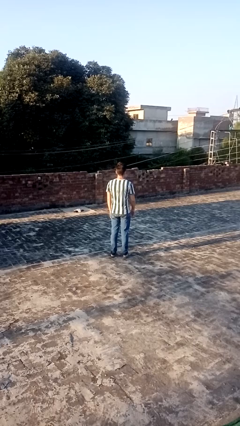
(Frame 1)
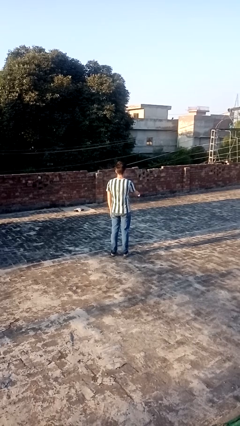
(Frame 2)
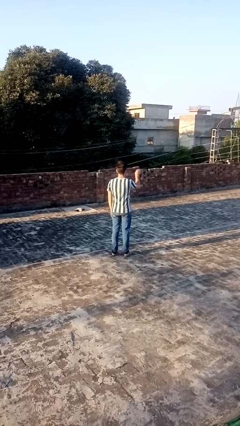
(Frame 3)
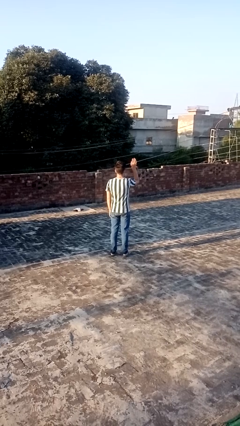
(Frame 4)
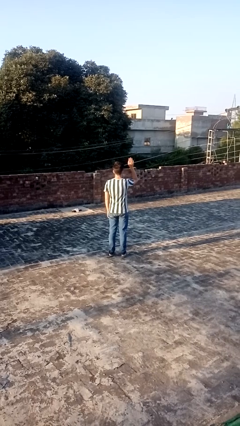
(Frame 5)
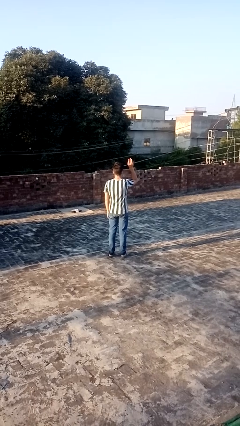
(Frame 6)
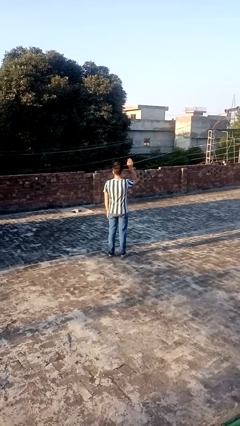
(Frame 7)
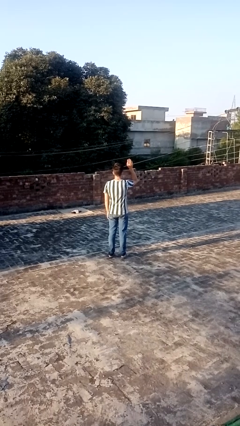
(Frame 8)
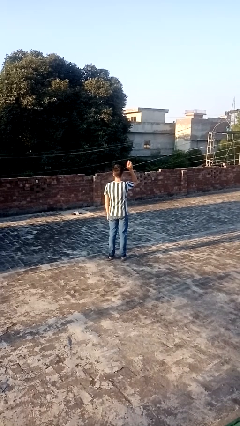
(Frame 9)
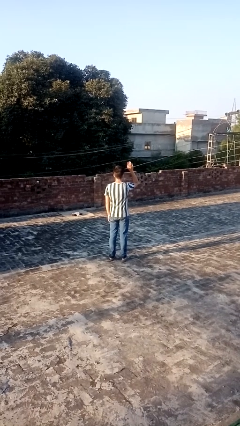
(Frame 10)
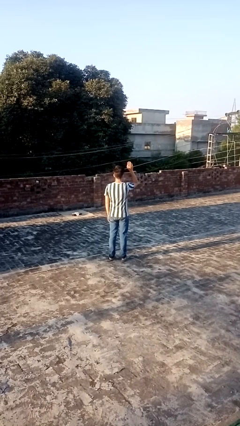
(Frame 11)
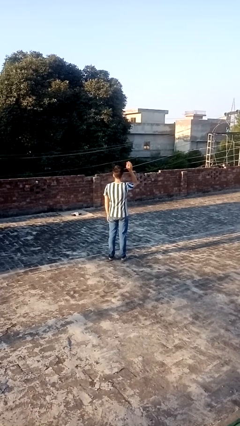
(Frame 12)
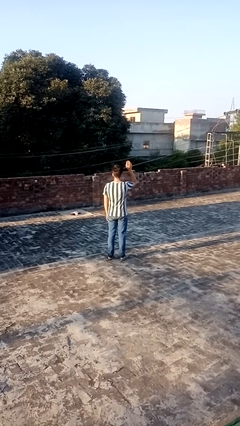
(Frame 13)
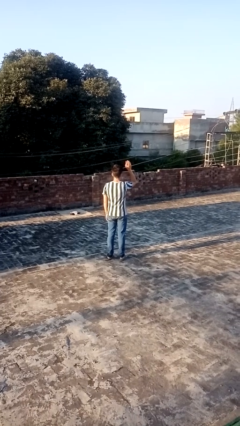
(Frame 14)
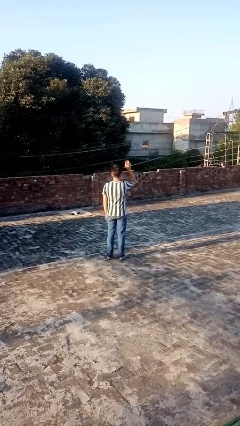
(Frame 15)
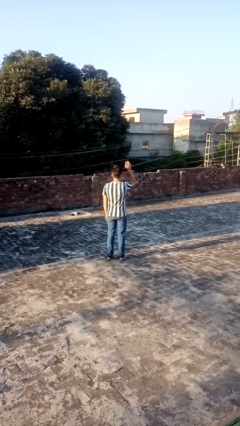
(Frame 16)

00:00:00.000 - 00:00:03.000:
person gestures raise hand

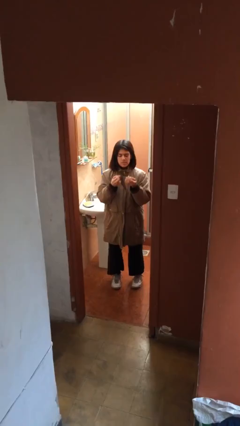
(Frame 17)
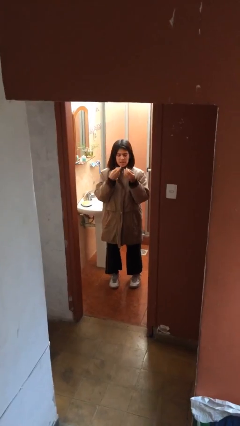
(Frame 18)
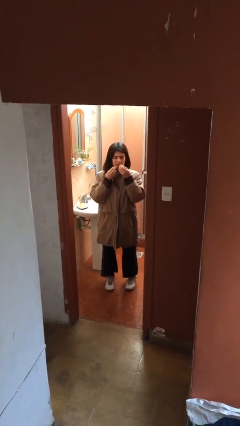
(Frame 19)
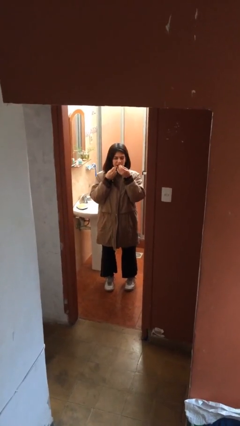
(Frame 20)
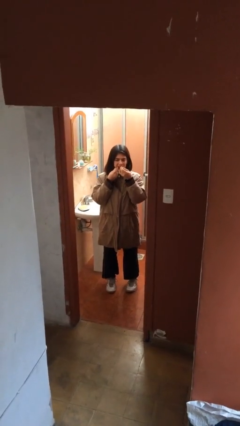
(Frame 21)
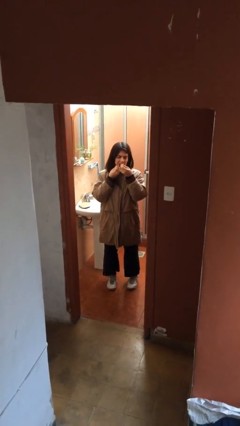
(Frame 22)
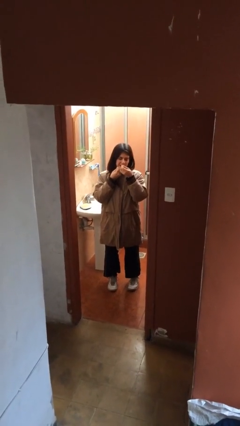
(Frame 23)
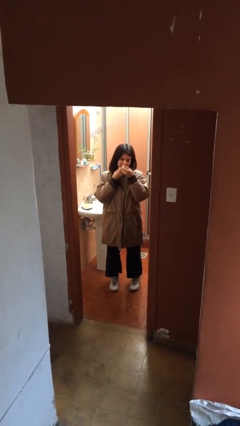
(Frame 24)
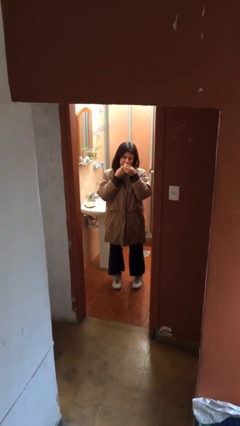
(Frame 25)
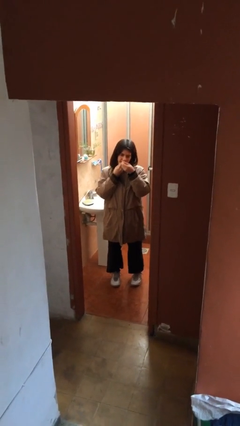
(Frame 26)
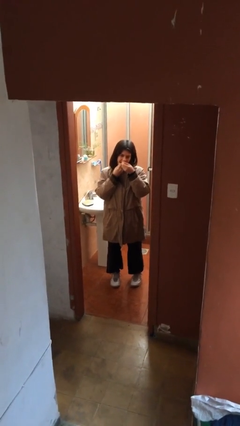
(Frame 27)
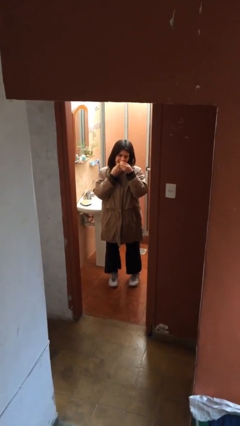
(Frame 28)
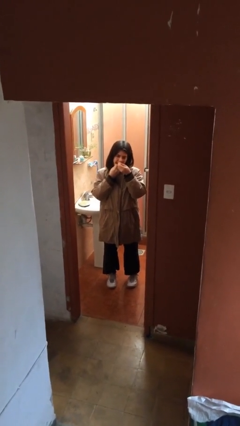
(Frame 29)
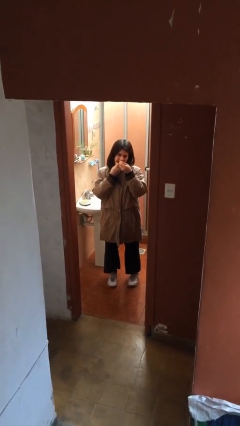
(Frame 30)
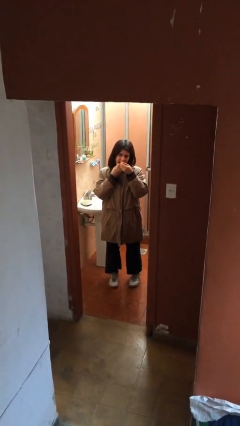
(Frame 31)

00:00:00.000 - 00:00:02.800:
person flosses

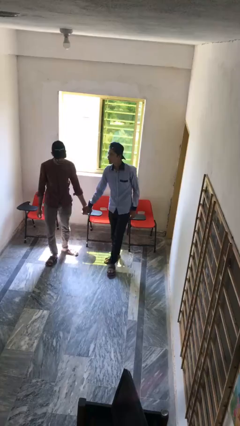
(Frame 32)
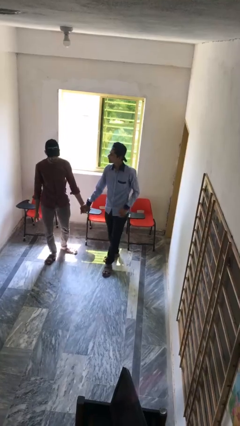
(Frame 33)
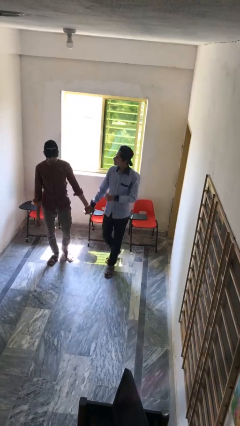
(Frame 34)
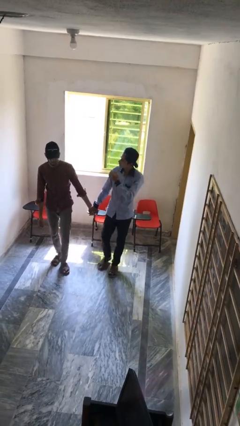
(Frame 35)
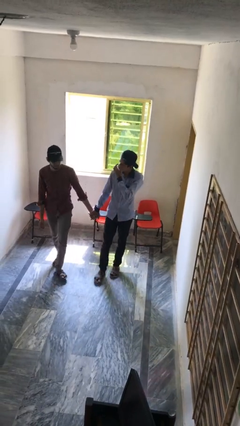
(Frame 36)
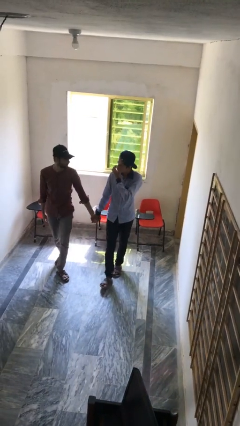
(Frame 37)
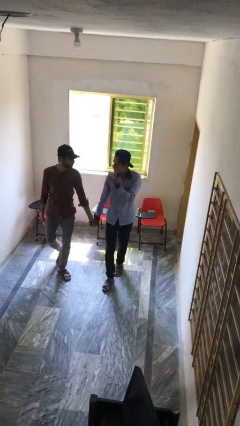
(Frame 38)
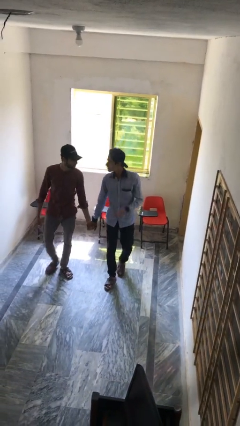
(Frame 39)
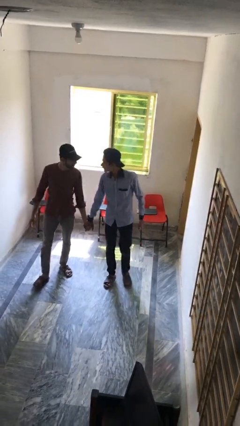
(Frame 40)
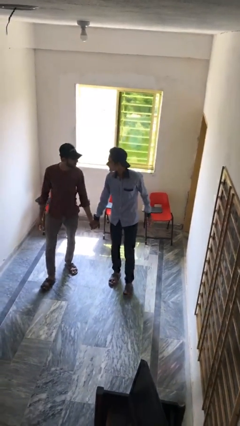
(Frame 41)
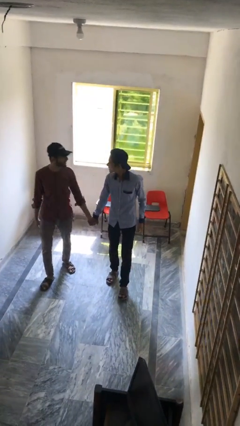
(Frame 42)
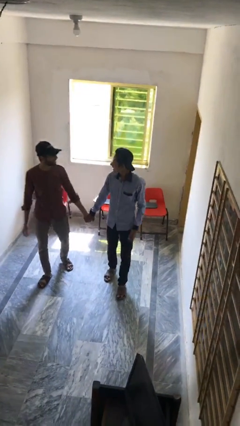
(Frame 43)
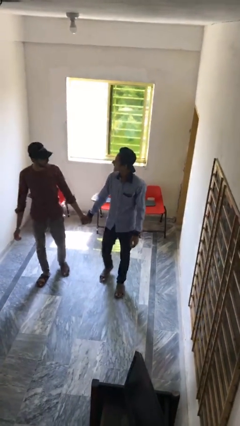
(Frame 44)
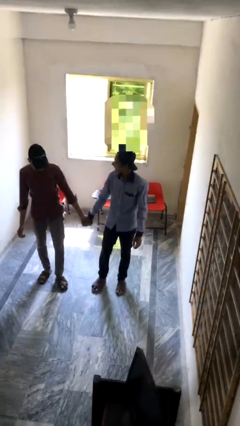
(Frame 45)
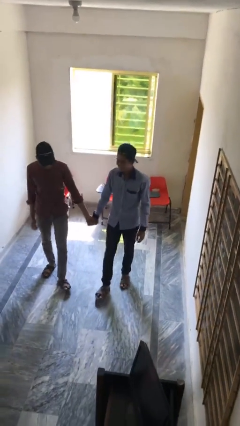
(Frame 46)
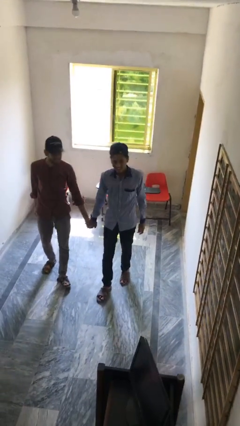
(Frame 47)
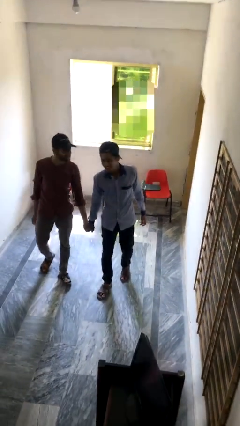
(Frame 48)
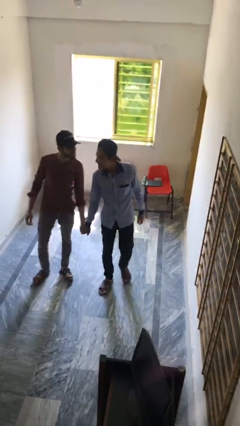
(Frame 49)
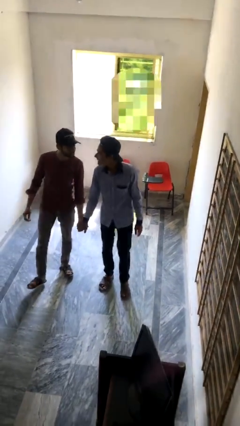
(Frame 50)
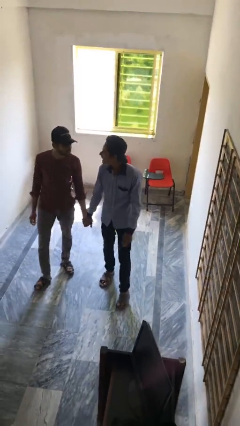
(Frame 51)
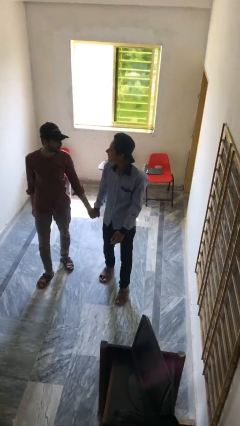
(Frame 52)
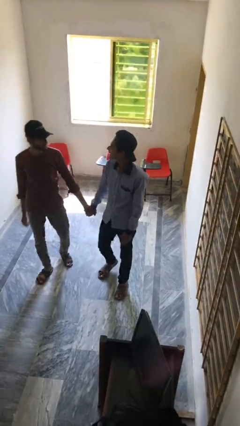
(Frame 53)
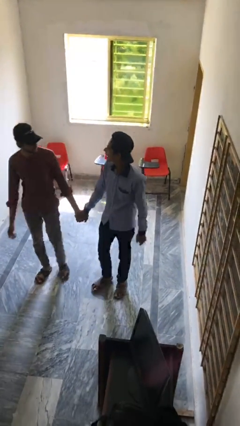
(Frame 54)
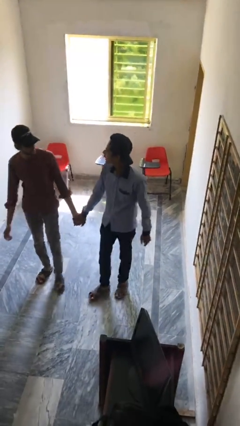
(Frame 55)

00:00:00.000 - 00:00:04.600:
person holds hand

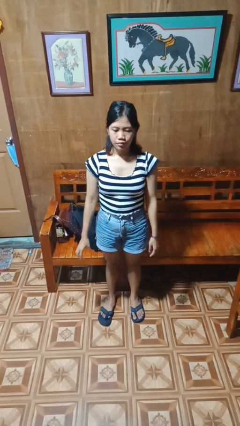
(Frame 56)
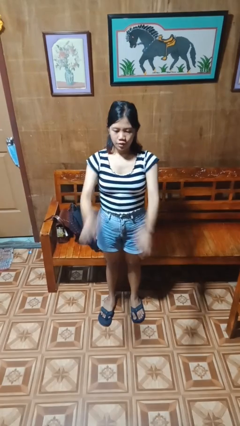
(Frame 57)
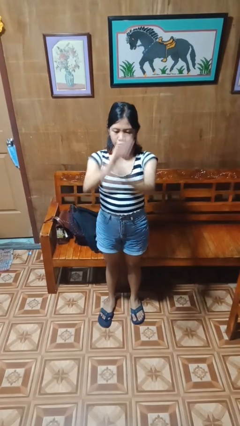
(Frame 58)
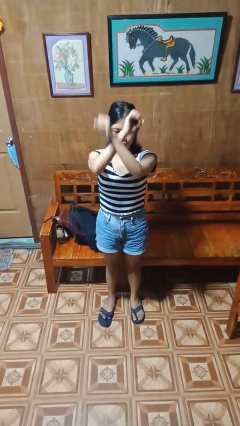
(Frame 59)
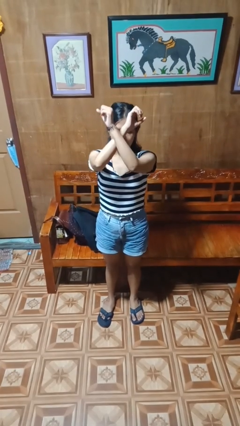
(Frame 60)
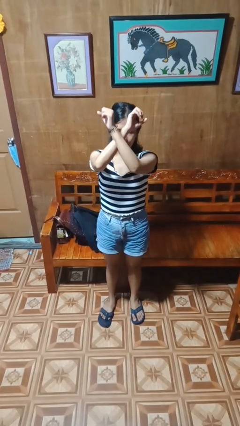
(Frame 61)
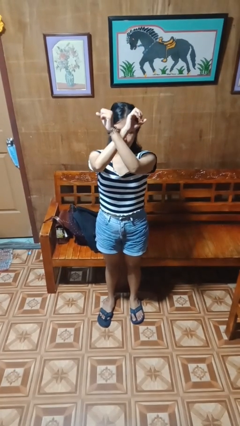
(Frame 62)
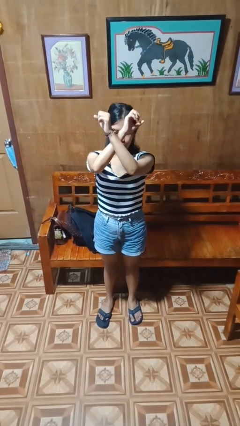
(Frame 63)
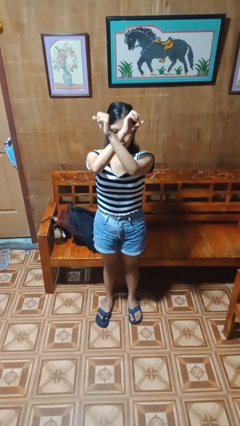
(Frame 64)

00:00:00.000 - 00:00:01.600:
person gestures arms x

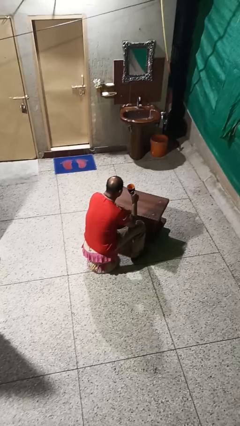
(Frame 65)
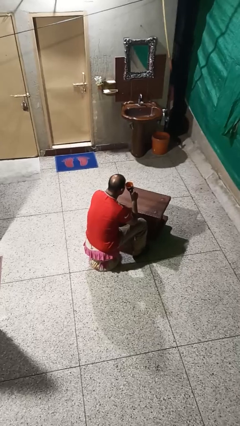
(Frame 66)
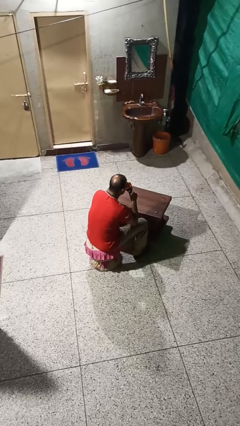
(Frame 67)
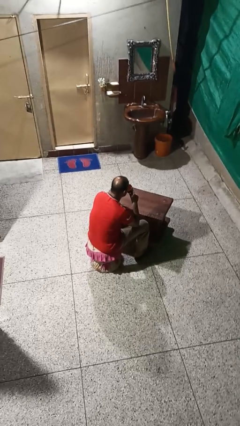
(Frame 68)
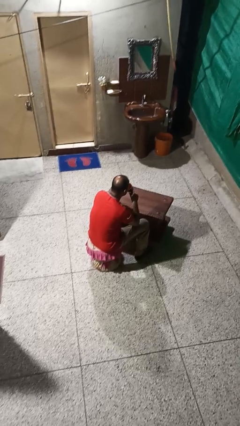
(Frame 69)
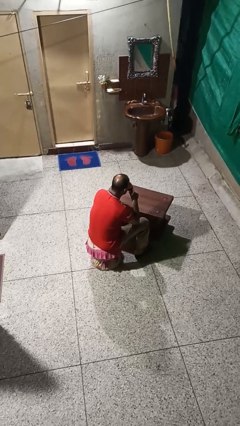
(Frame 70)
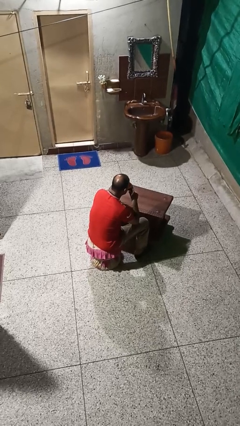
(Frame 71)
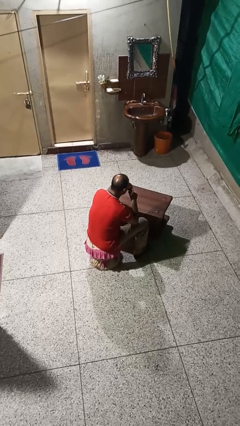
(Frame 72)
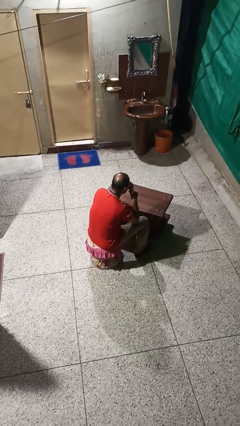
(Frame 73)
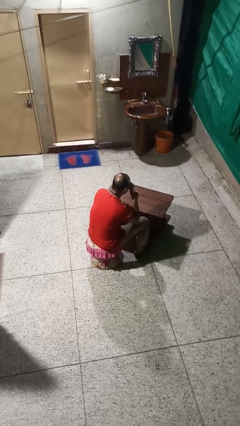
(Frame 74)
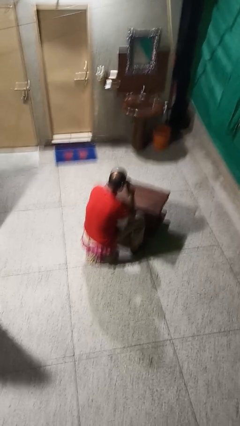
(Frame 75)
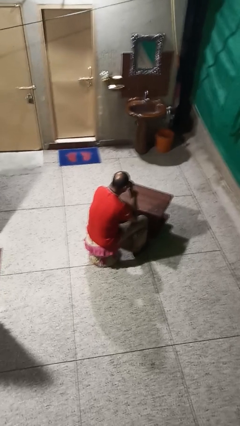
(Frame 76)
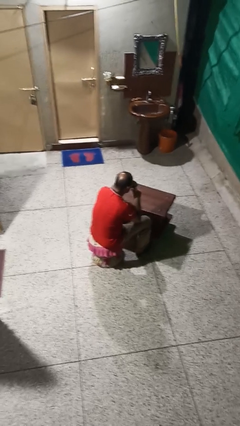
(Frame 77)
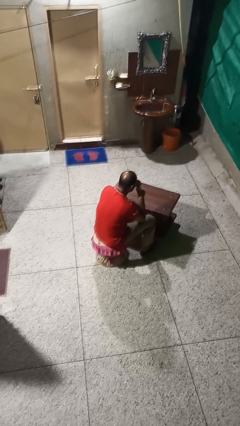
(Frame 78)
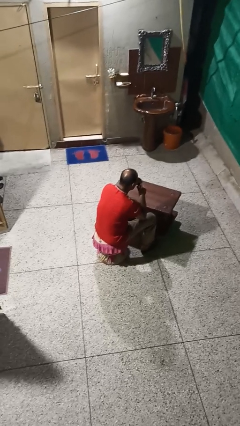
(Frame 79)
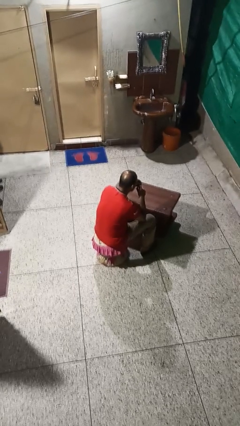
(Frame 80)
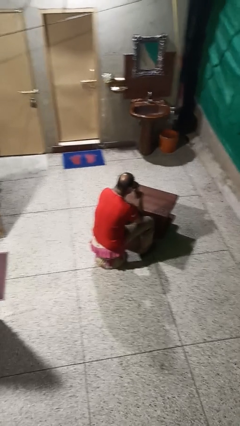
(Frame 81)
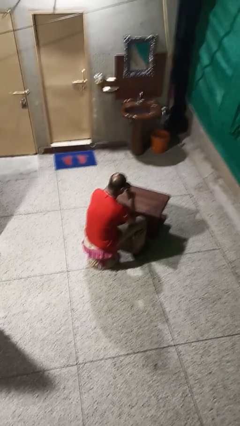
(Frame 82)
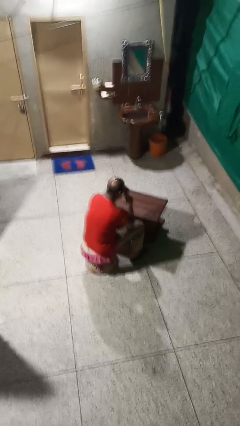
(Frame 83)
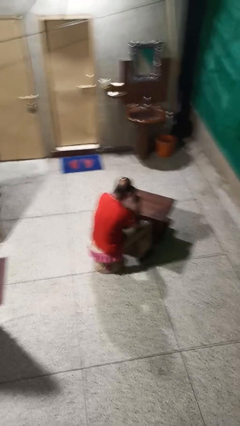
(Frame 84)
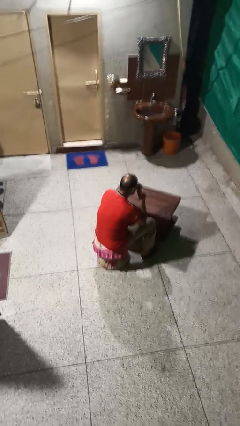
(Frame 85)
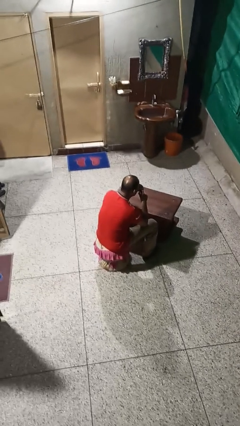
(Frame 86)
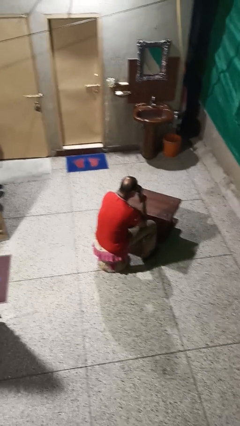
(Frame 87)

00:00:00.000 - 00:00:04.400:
person drinks from mug

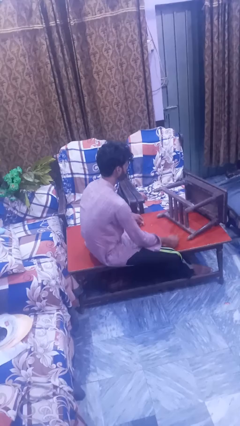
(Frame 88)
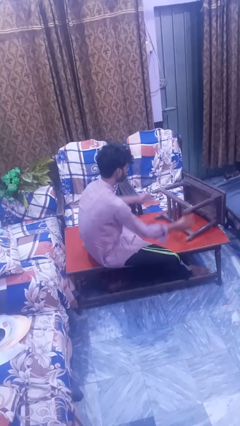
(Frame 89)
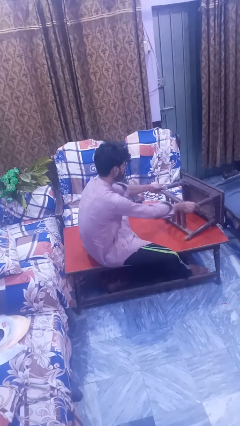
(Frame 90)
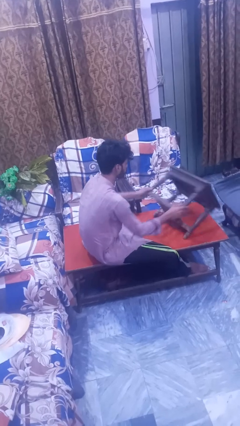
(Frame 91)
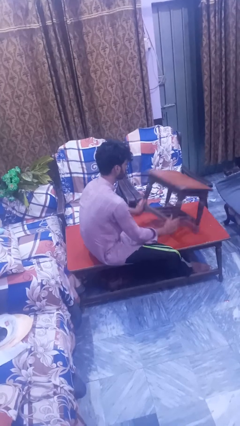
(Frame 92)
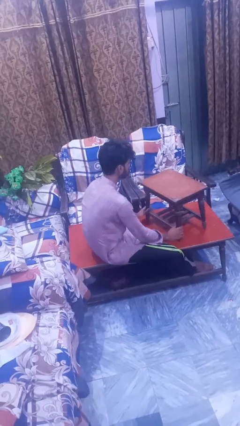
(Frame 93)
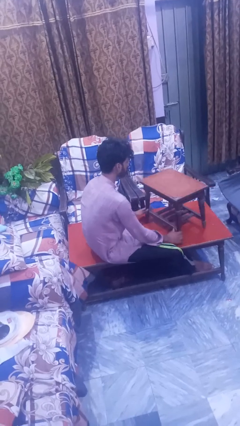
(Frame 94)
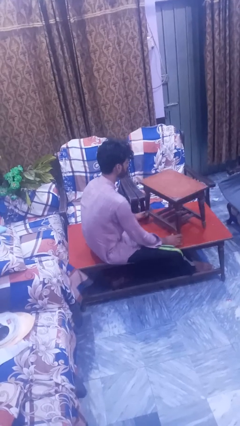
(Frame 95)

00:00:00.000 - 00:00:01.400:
person sets upright furniture
